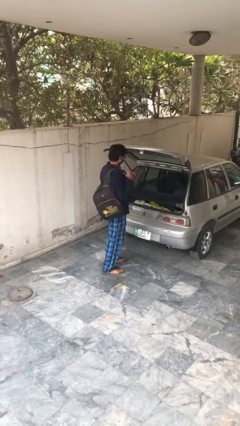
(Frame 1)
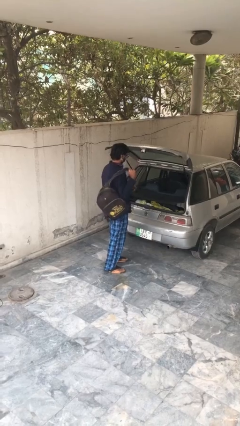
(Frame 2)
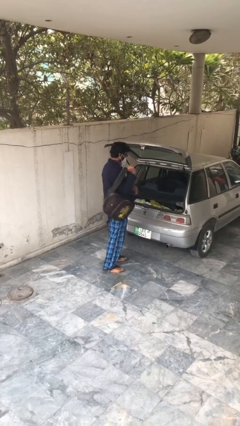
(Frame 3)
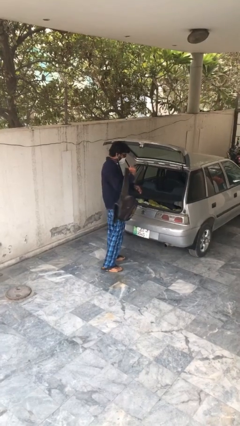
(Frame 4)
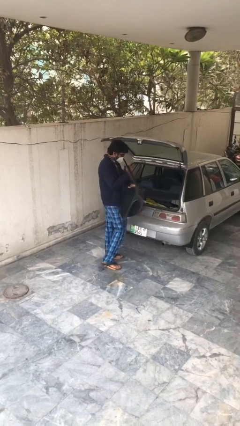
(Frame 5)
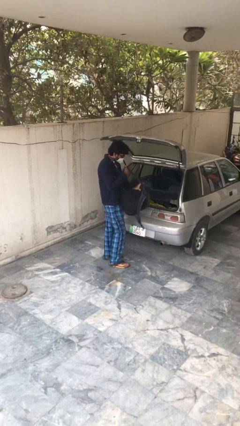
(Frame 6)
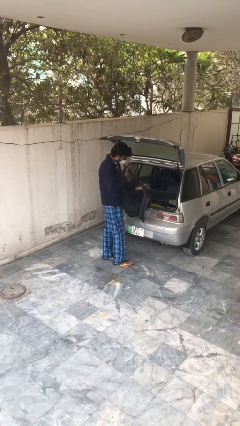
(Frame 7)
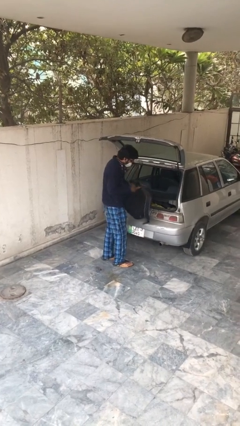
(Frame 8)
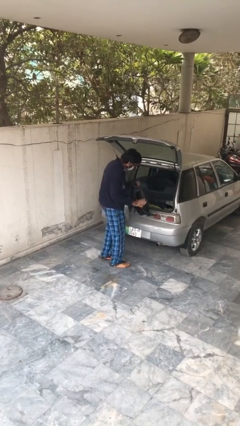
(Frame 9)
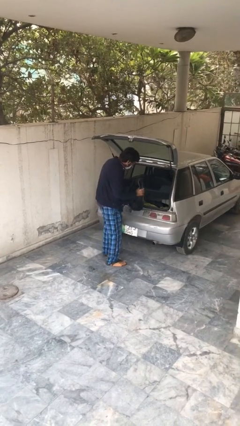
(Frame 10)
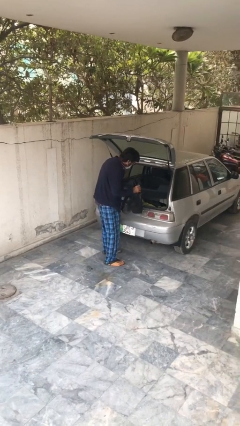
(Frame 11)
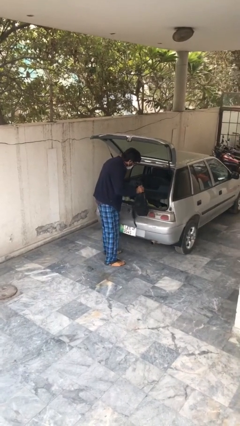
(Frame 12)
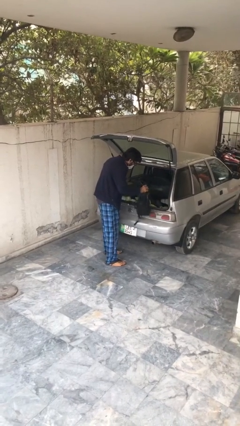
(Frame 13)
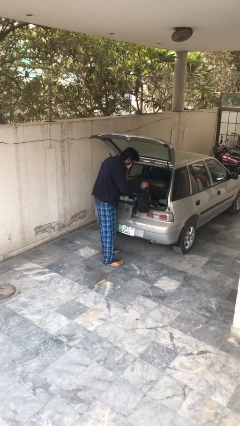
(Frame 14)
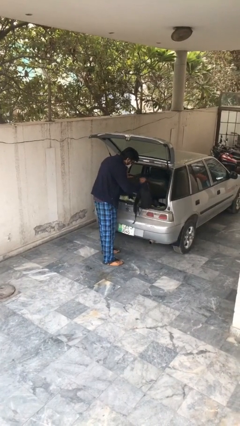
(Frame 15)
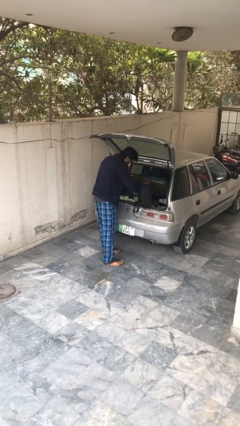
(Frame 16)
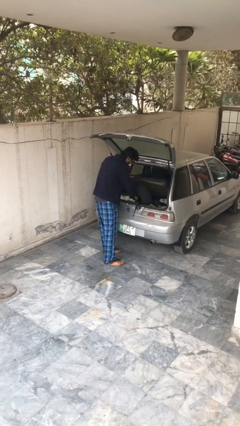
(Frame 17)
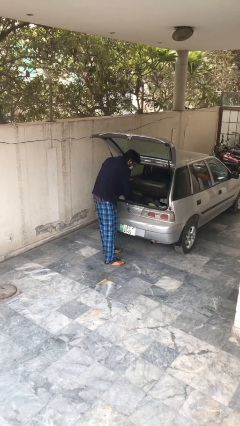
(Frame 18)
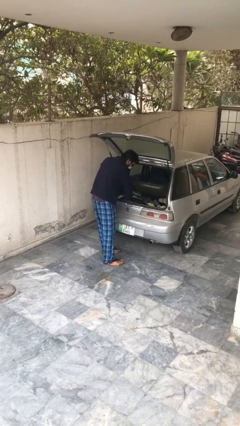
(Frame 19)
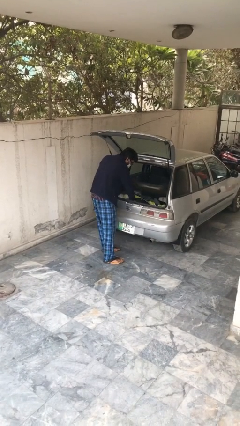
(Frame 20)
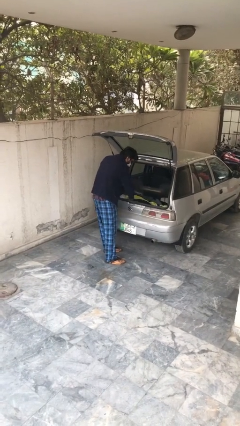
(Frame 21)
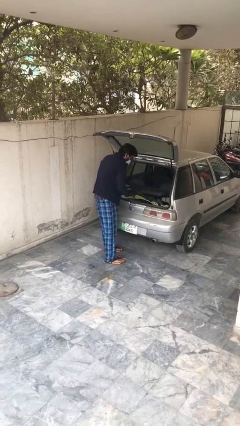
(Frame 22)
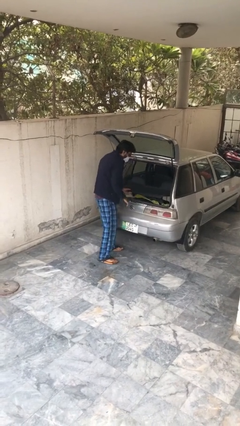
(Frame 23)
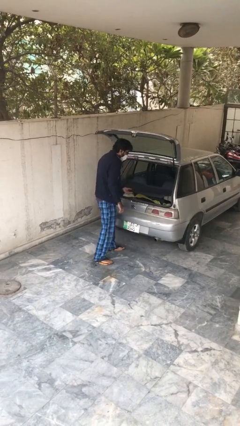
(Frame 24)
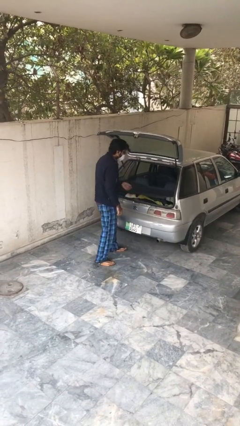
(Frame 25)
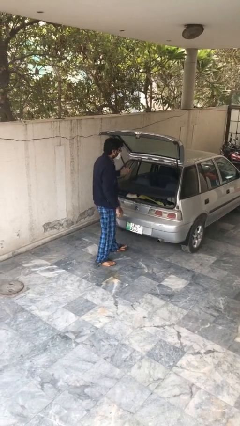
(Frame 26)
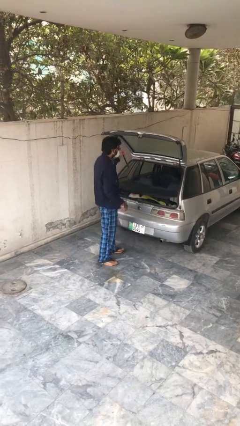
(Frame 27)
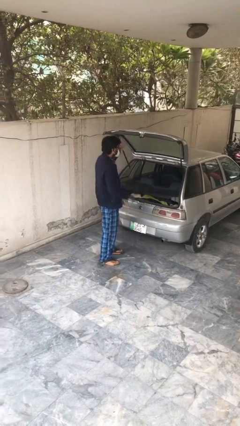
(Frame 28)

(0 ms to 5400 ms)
person loads car

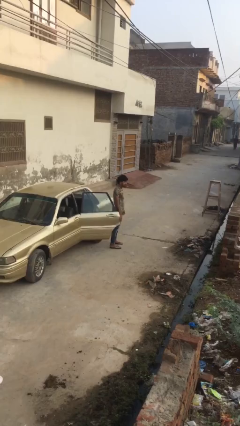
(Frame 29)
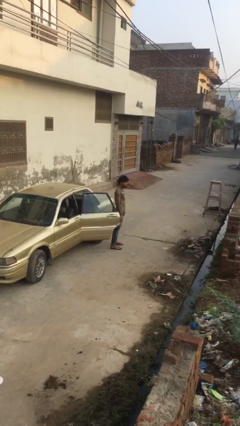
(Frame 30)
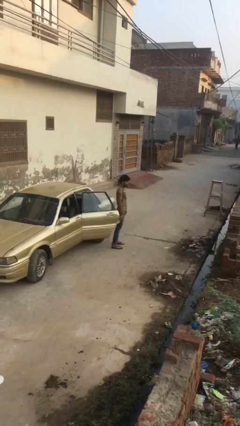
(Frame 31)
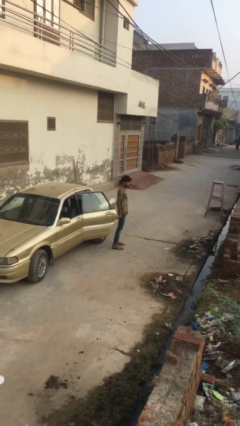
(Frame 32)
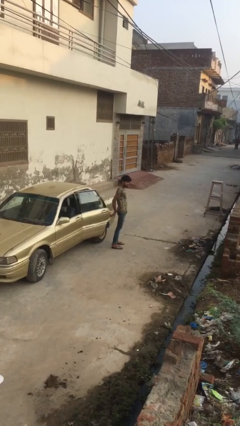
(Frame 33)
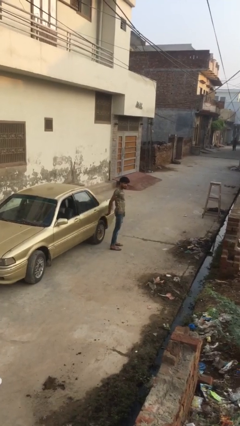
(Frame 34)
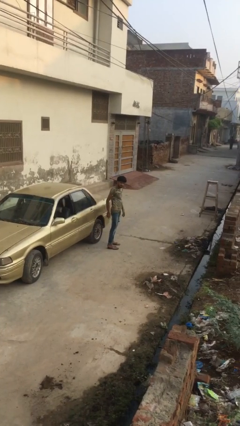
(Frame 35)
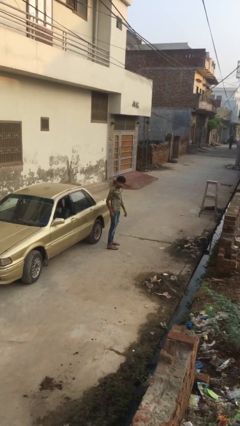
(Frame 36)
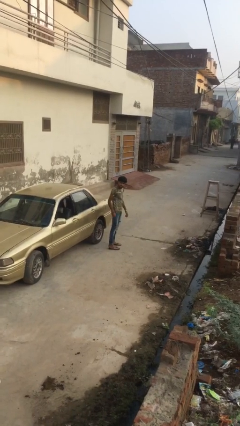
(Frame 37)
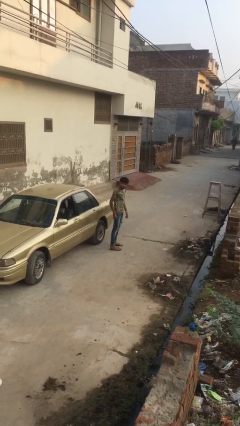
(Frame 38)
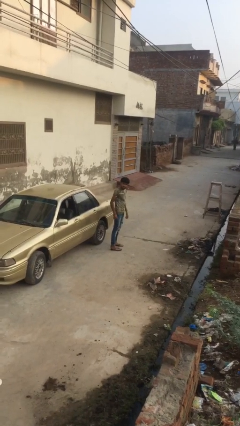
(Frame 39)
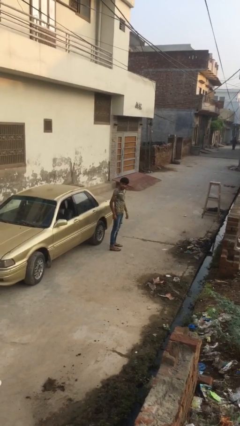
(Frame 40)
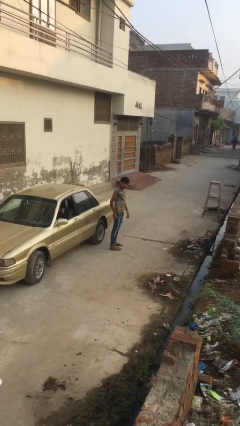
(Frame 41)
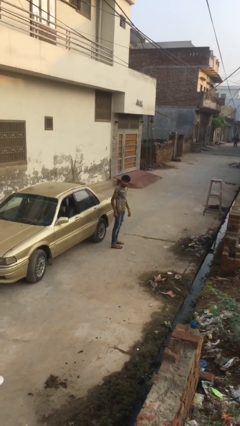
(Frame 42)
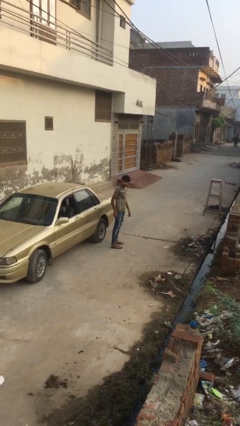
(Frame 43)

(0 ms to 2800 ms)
person closes car door

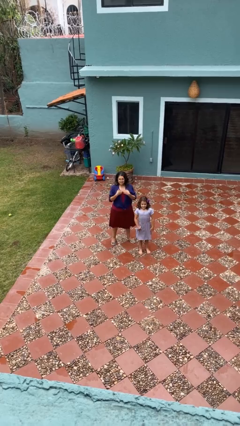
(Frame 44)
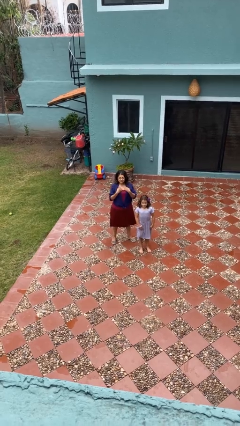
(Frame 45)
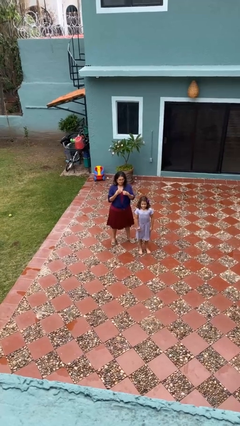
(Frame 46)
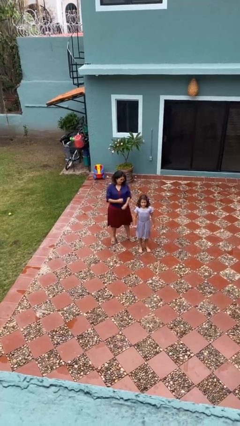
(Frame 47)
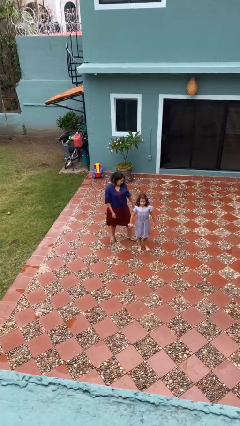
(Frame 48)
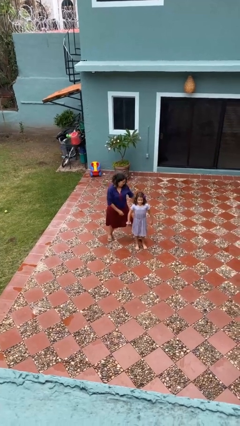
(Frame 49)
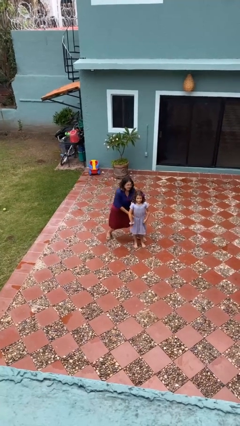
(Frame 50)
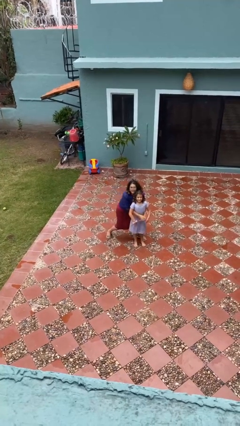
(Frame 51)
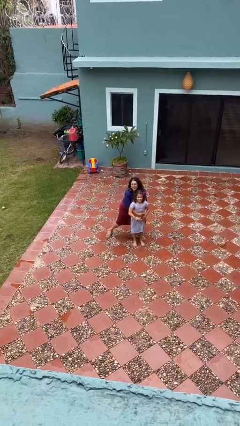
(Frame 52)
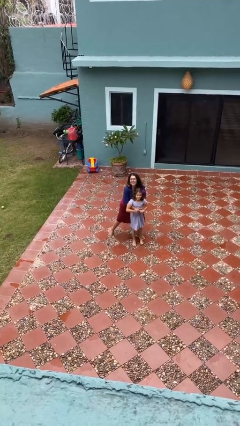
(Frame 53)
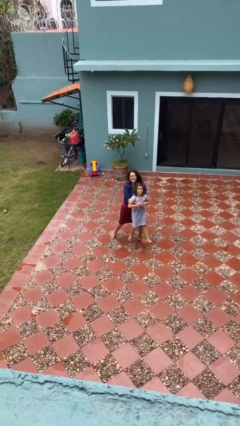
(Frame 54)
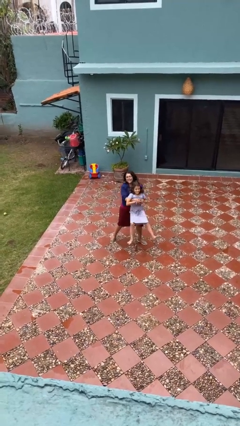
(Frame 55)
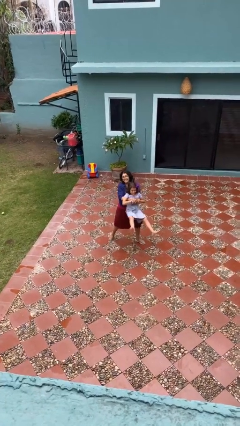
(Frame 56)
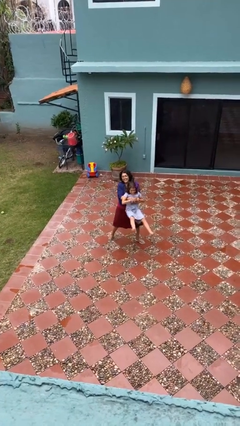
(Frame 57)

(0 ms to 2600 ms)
person picks up person

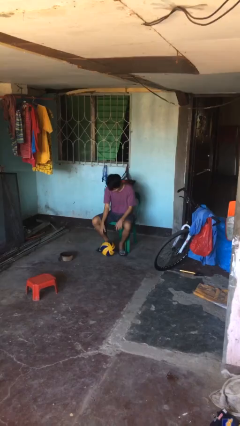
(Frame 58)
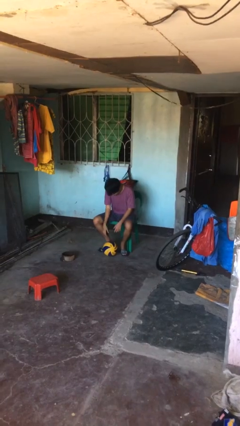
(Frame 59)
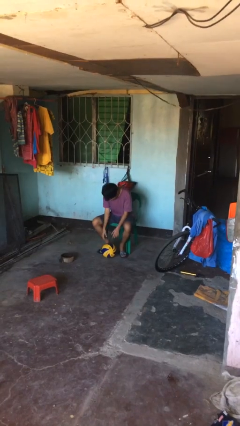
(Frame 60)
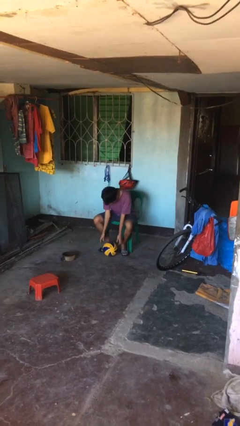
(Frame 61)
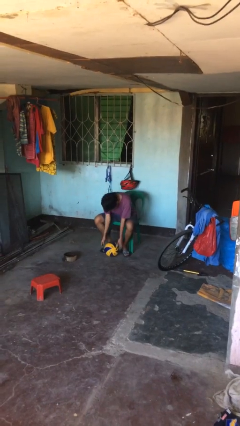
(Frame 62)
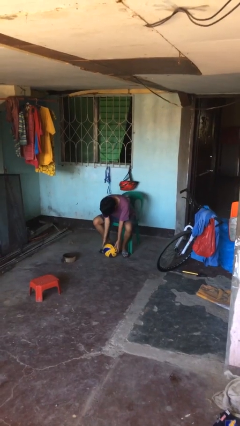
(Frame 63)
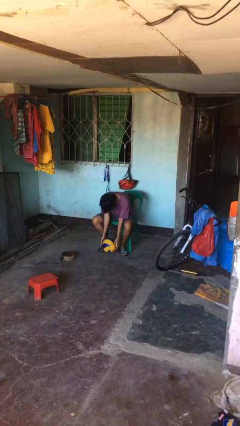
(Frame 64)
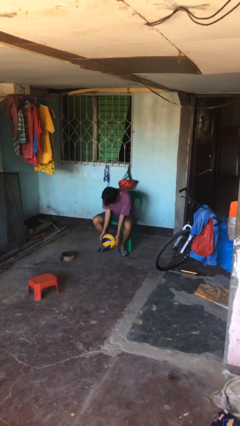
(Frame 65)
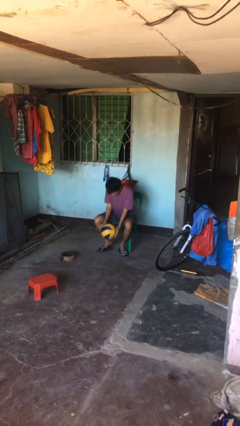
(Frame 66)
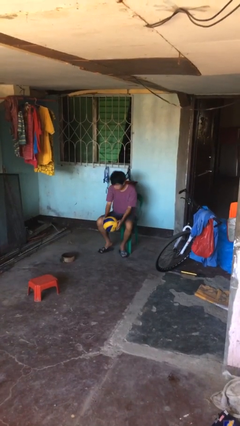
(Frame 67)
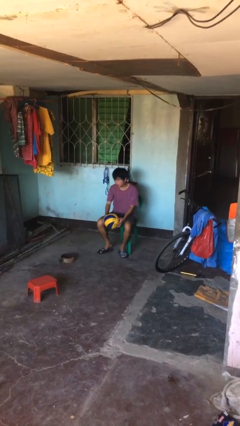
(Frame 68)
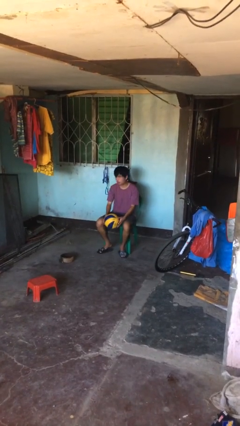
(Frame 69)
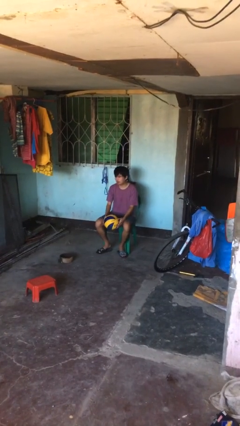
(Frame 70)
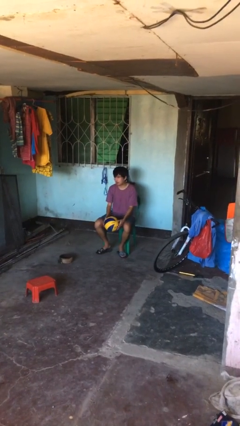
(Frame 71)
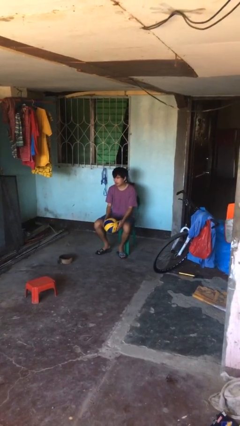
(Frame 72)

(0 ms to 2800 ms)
person picks up object from floor

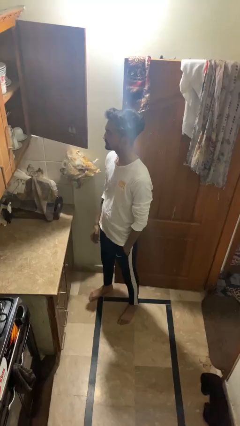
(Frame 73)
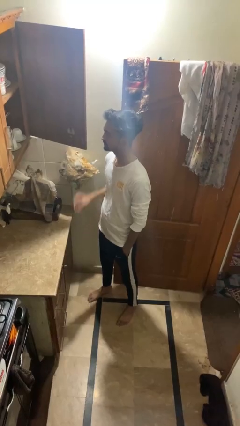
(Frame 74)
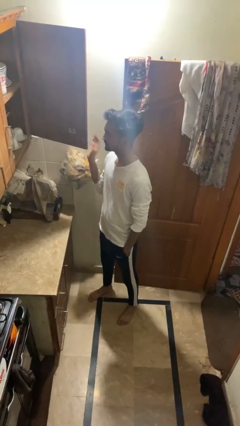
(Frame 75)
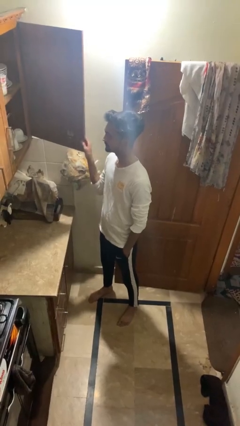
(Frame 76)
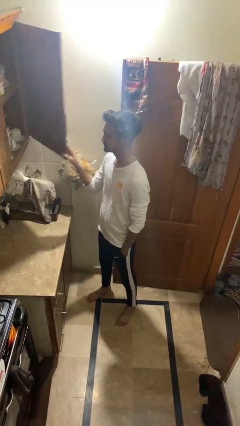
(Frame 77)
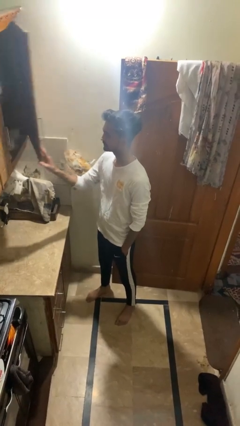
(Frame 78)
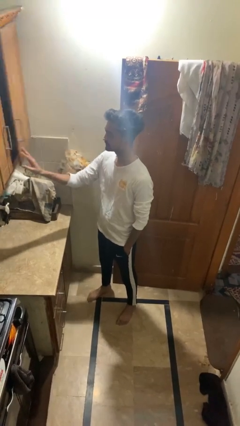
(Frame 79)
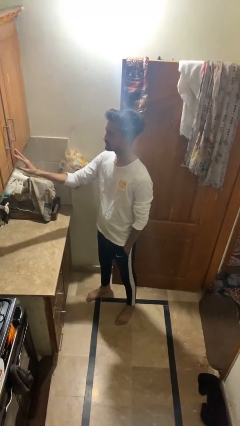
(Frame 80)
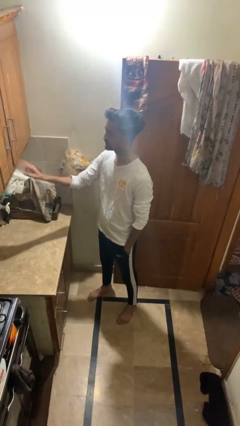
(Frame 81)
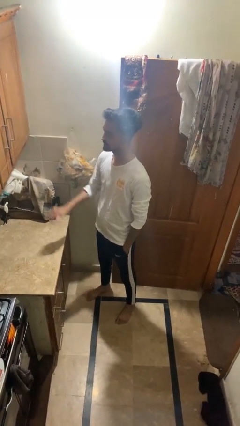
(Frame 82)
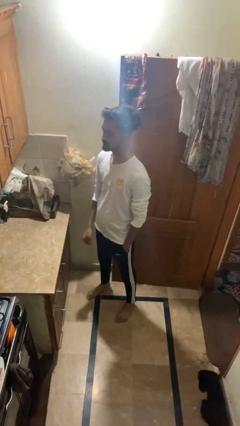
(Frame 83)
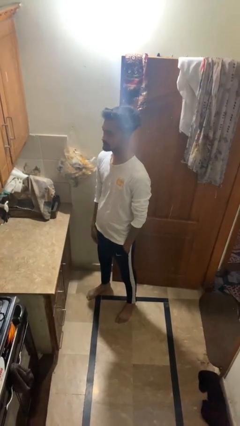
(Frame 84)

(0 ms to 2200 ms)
person closes cabinet

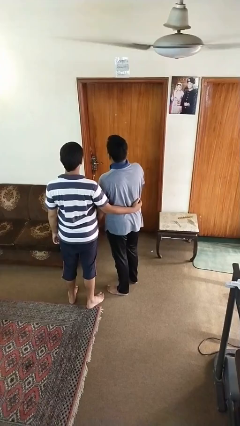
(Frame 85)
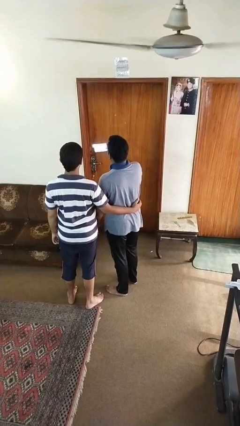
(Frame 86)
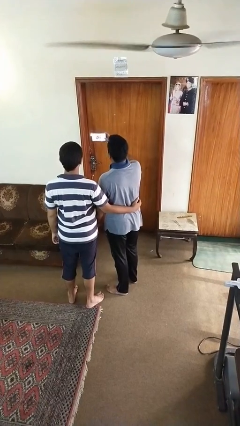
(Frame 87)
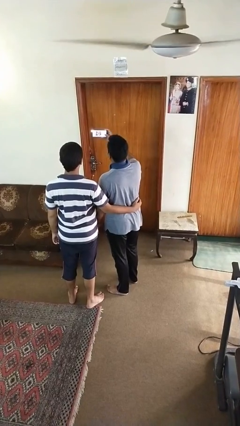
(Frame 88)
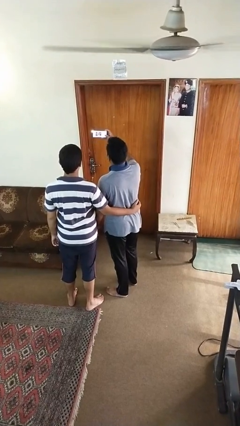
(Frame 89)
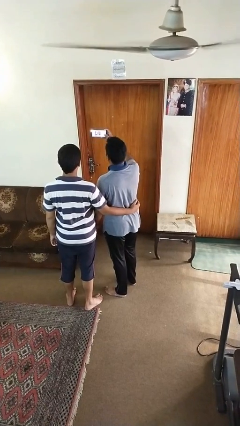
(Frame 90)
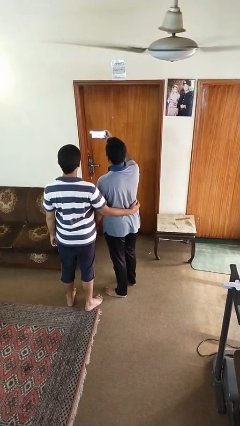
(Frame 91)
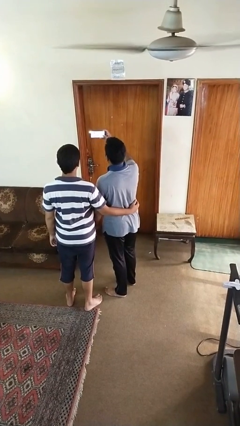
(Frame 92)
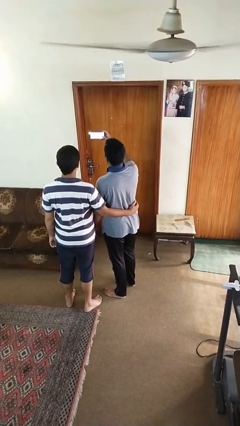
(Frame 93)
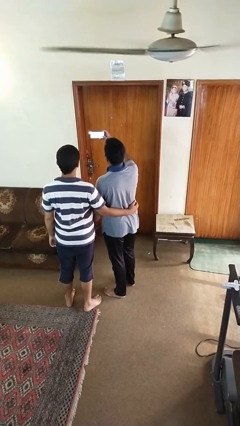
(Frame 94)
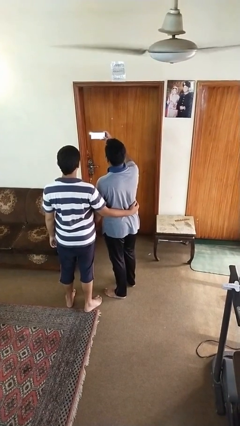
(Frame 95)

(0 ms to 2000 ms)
person takes selfie with person
